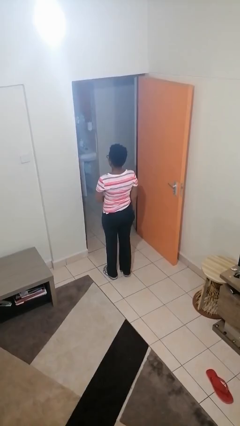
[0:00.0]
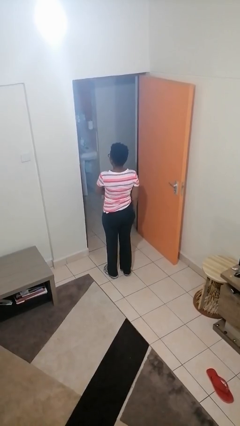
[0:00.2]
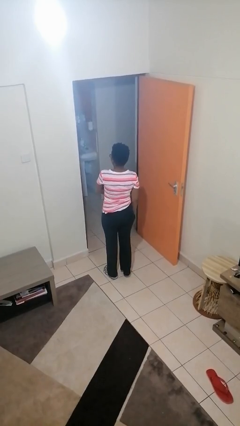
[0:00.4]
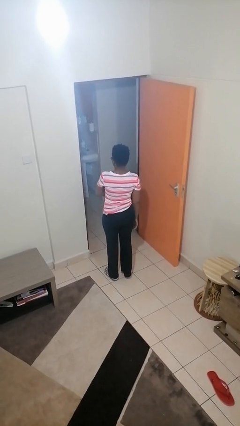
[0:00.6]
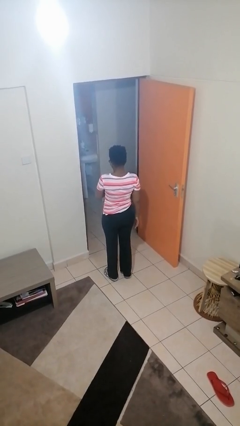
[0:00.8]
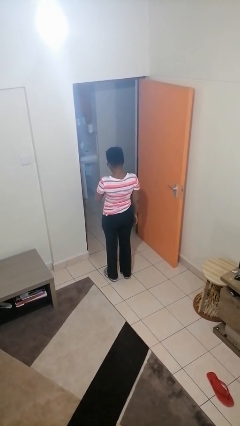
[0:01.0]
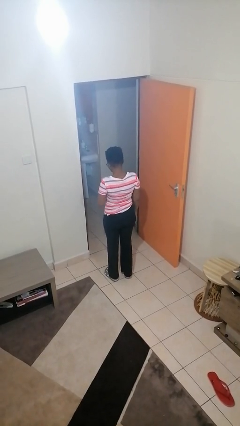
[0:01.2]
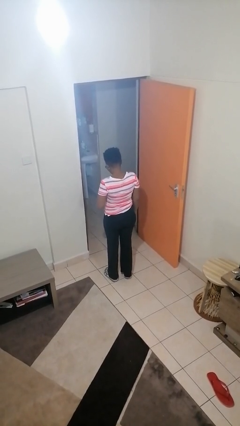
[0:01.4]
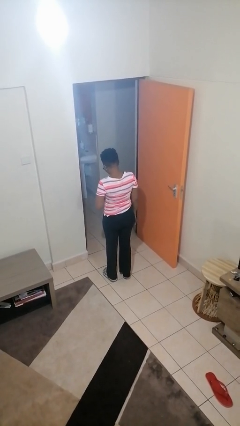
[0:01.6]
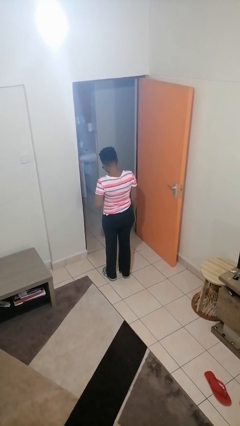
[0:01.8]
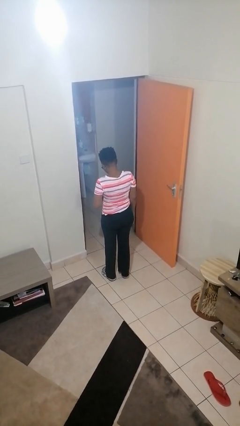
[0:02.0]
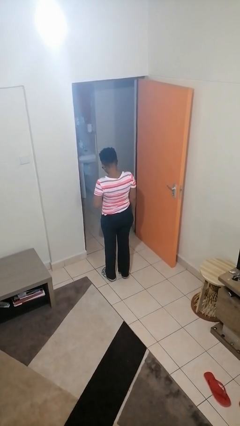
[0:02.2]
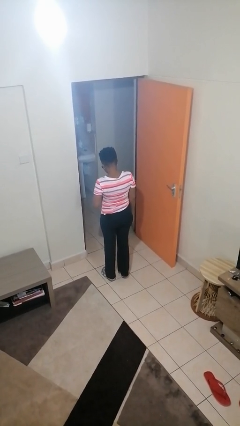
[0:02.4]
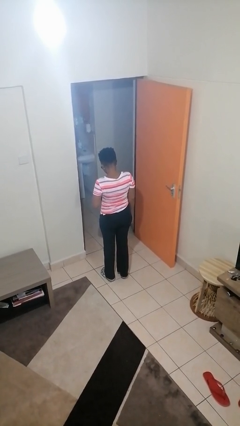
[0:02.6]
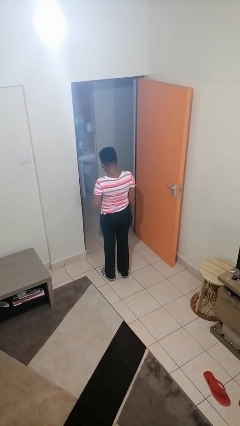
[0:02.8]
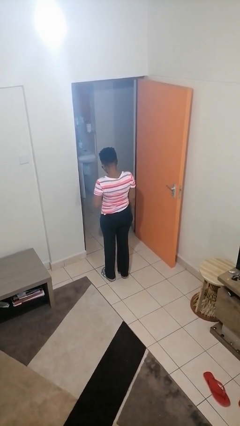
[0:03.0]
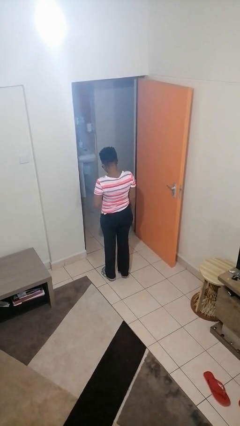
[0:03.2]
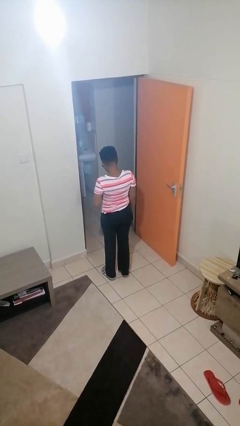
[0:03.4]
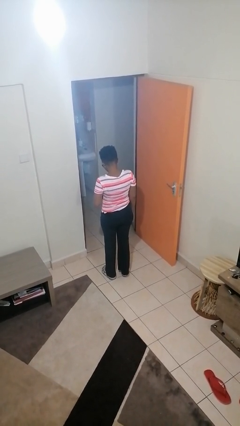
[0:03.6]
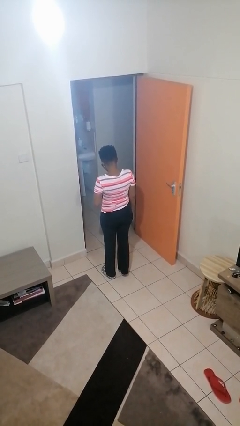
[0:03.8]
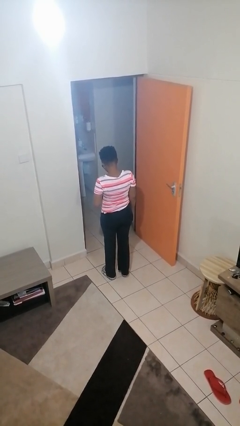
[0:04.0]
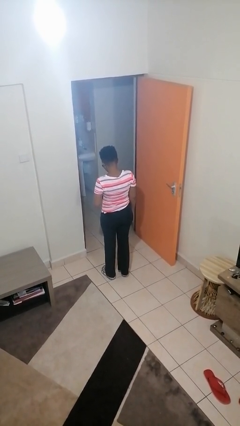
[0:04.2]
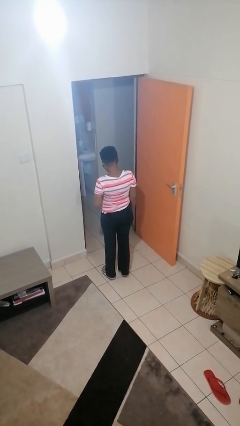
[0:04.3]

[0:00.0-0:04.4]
person takes phone from pocket

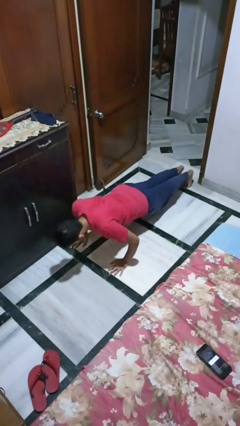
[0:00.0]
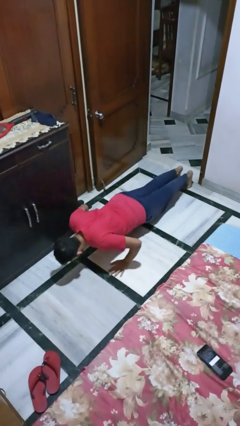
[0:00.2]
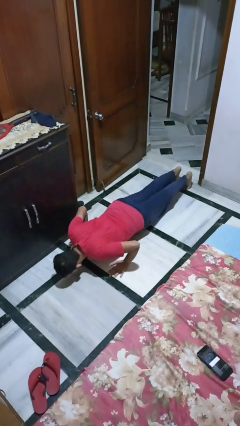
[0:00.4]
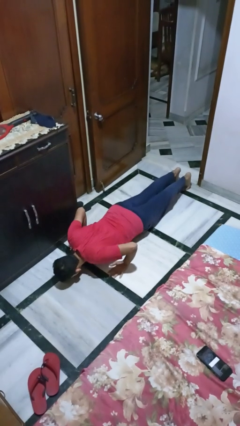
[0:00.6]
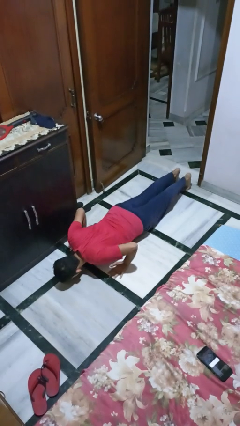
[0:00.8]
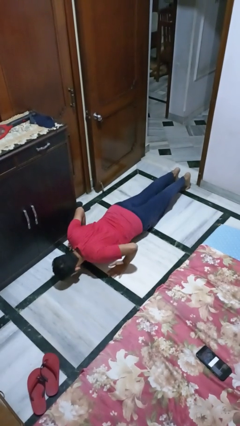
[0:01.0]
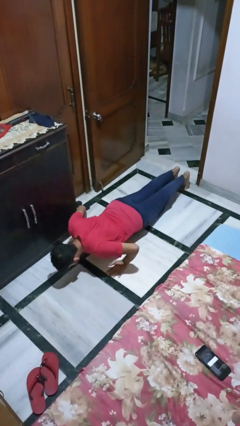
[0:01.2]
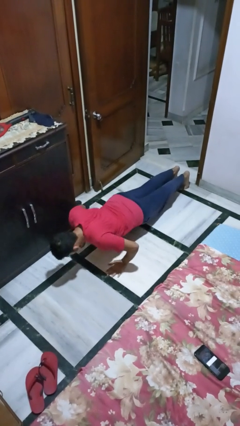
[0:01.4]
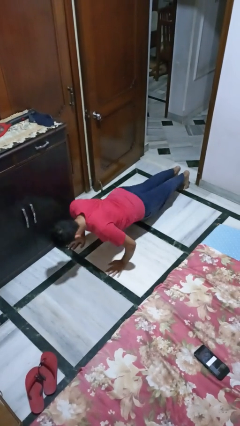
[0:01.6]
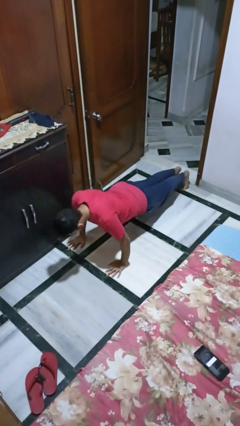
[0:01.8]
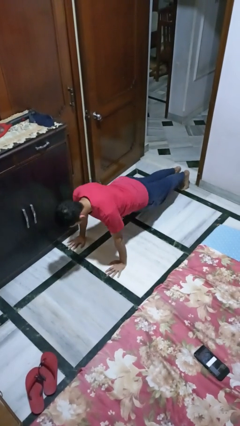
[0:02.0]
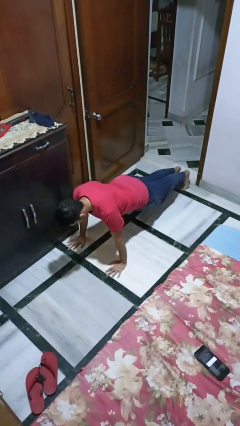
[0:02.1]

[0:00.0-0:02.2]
person exercises with pushup

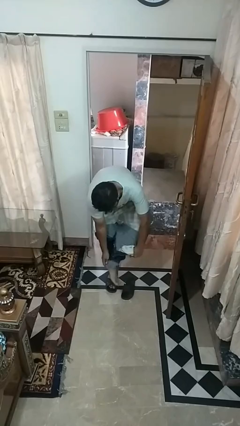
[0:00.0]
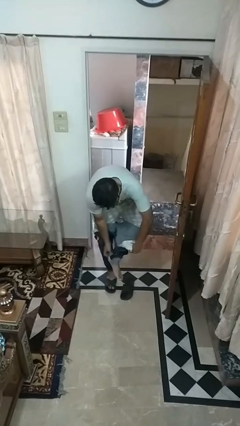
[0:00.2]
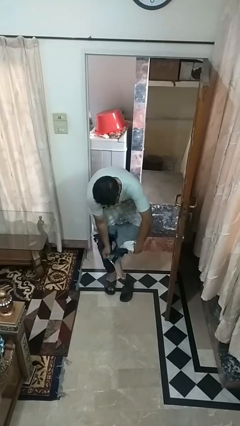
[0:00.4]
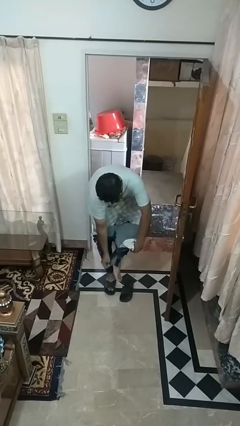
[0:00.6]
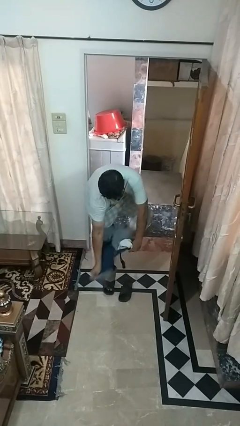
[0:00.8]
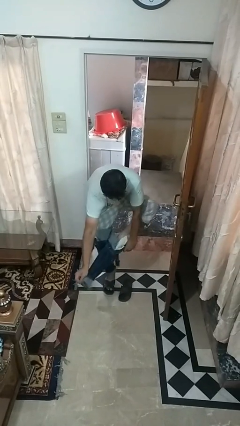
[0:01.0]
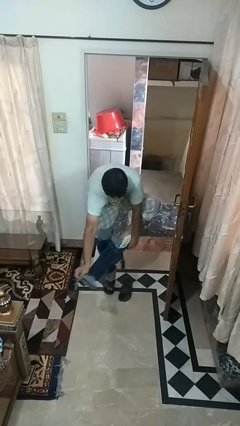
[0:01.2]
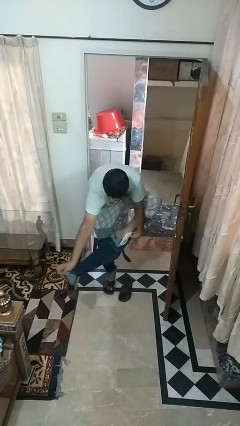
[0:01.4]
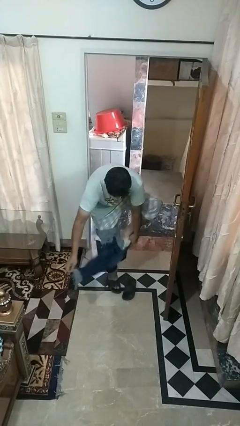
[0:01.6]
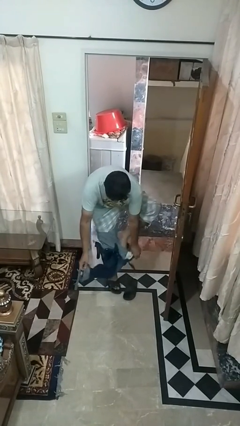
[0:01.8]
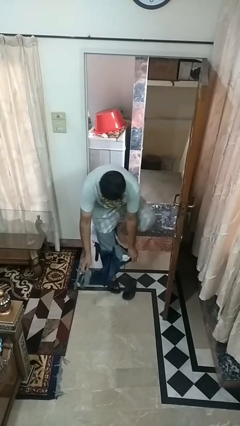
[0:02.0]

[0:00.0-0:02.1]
person takes off pants

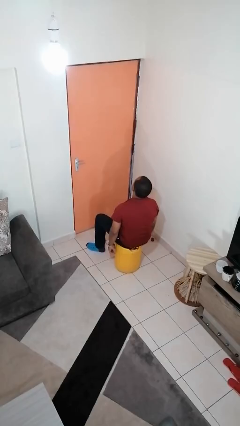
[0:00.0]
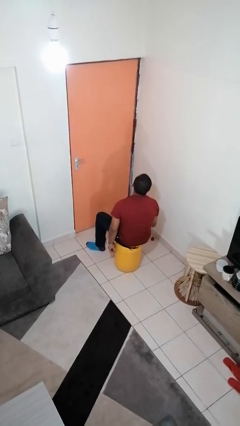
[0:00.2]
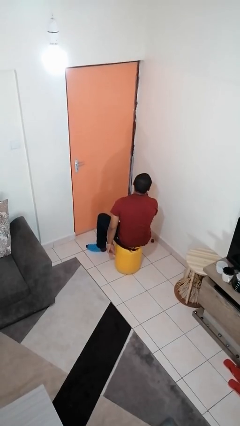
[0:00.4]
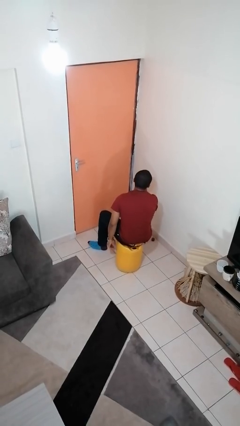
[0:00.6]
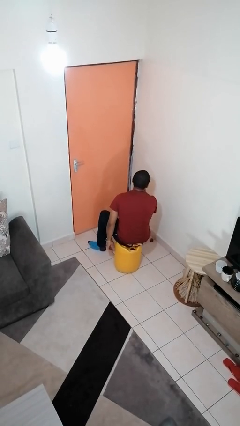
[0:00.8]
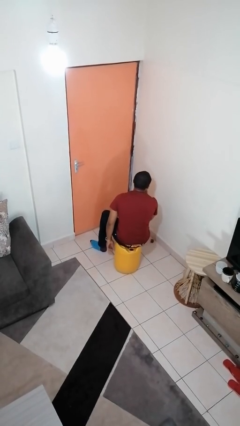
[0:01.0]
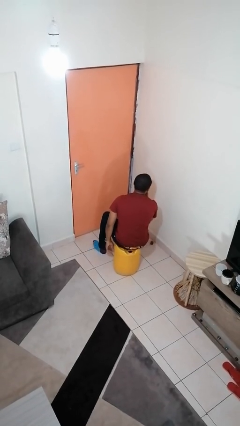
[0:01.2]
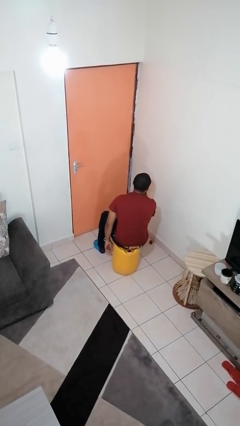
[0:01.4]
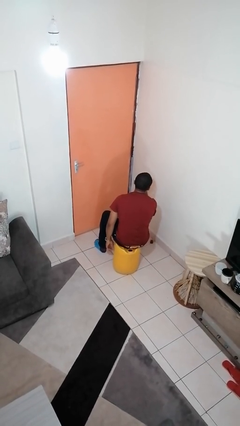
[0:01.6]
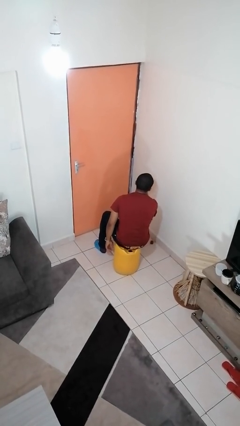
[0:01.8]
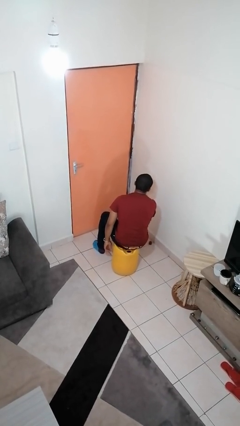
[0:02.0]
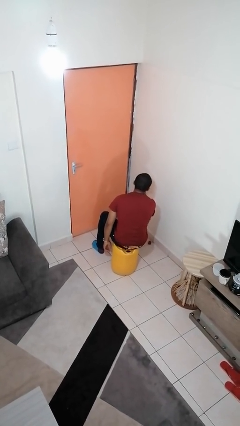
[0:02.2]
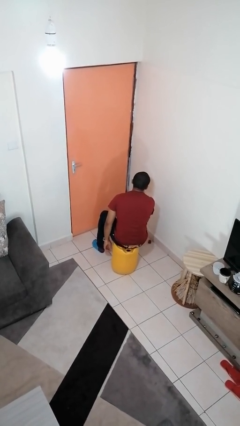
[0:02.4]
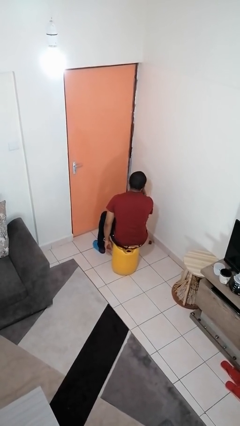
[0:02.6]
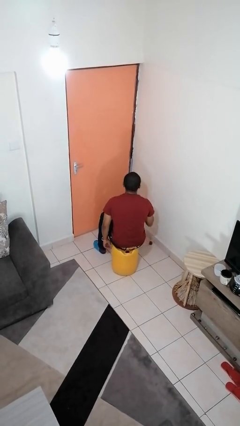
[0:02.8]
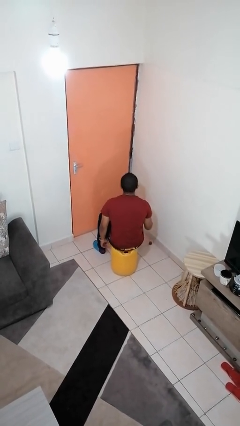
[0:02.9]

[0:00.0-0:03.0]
person strokes chin

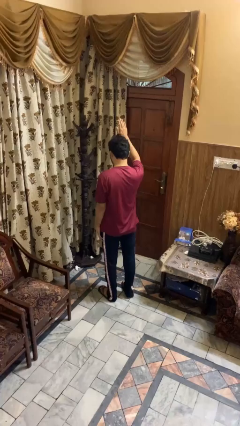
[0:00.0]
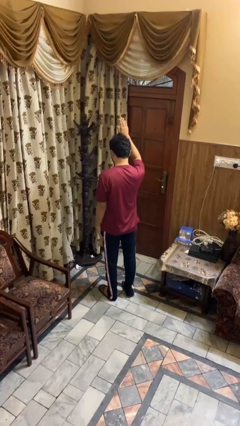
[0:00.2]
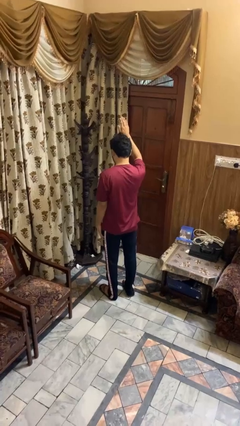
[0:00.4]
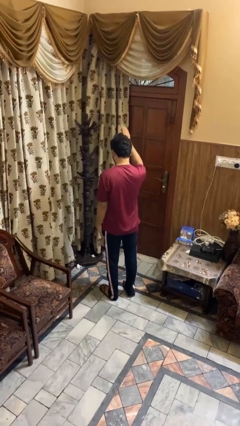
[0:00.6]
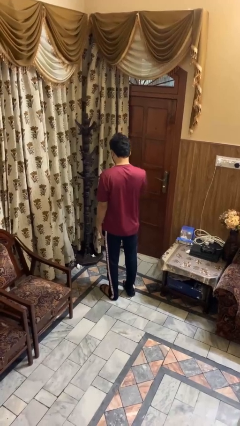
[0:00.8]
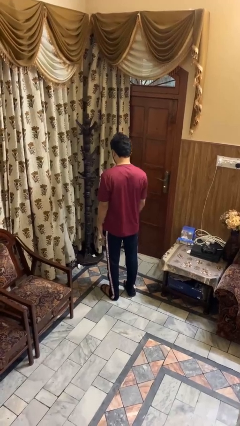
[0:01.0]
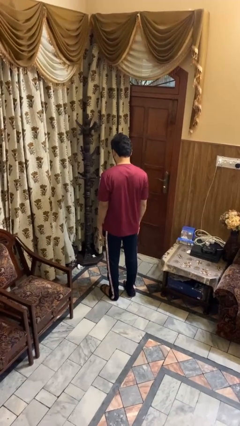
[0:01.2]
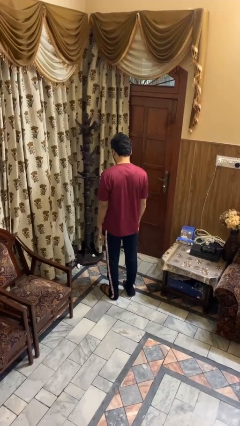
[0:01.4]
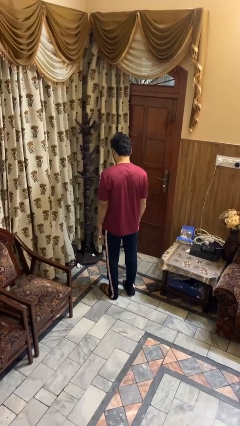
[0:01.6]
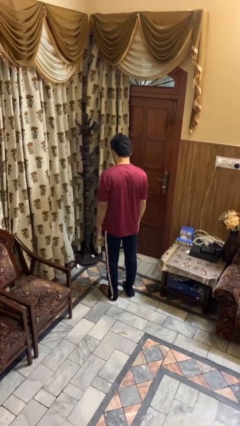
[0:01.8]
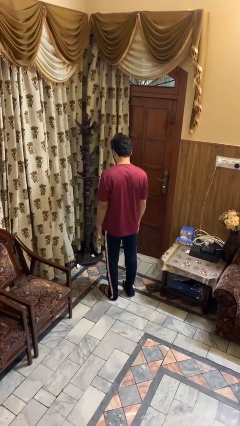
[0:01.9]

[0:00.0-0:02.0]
person gestures lower hand

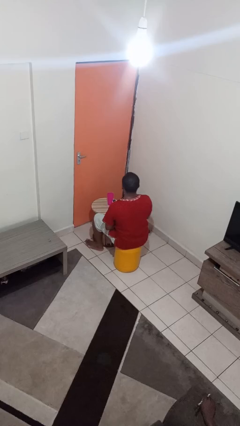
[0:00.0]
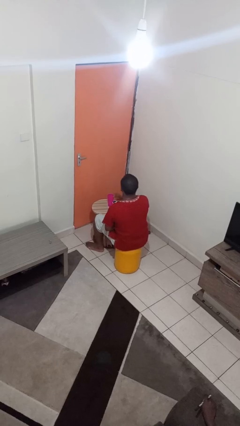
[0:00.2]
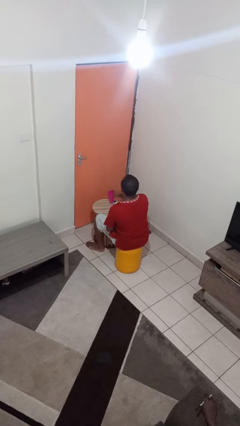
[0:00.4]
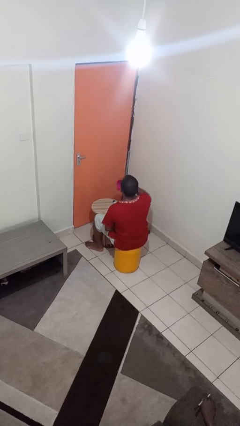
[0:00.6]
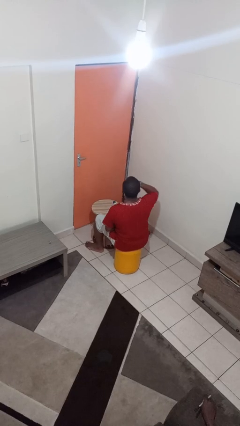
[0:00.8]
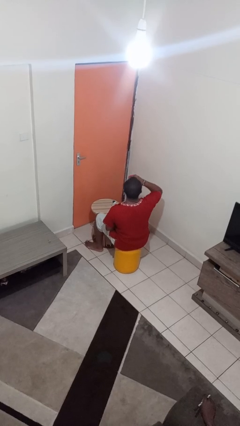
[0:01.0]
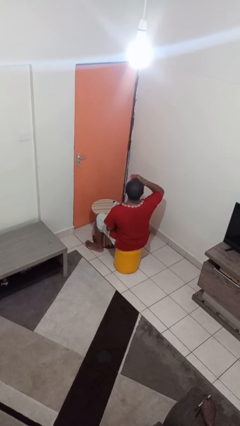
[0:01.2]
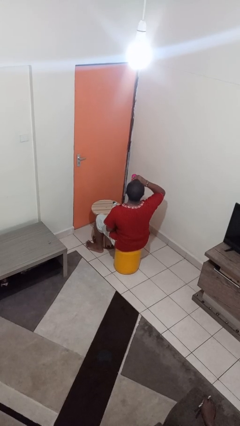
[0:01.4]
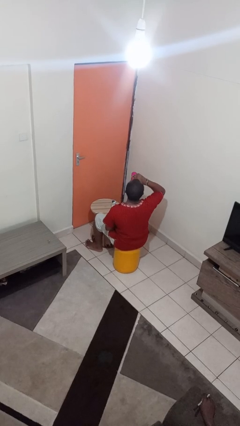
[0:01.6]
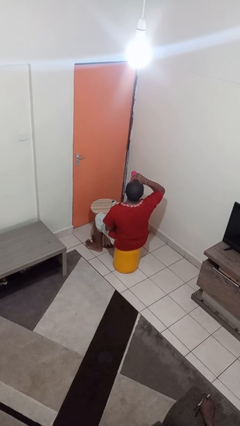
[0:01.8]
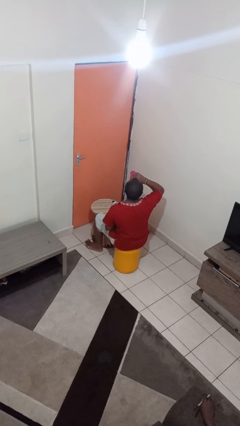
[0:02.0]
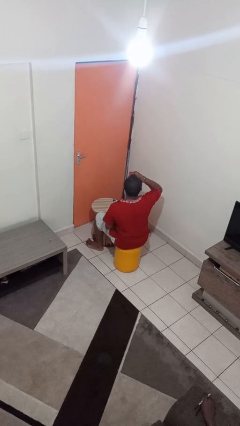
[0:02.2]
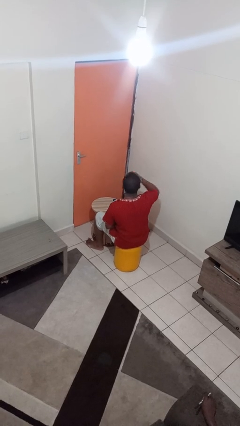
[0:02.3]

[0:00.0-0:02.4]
person drinks from cup

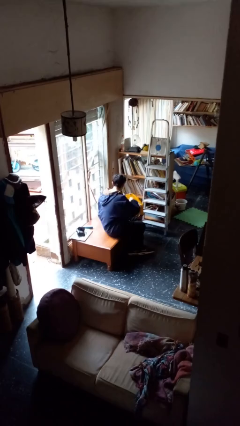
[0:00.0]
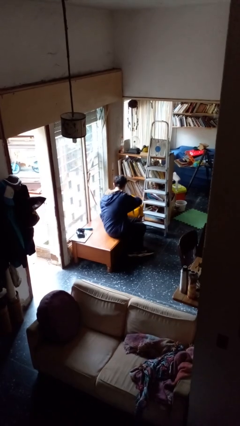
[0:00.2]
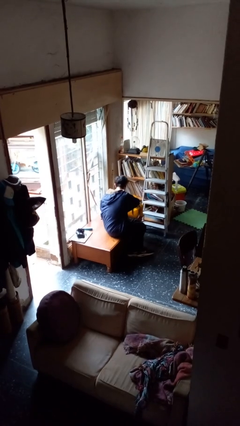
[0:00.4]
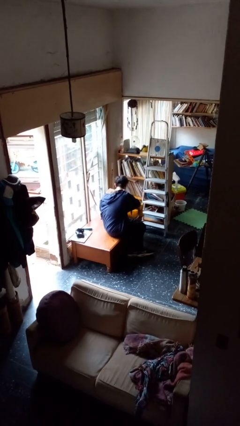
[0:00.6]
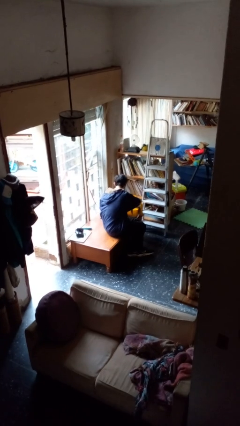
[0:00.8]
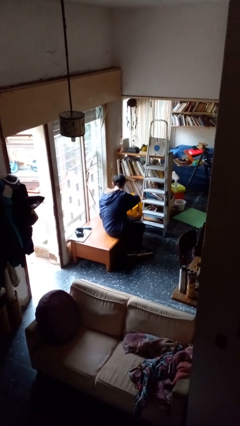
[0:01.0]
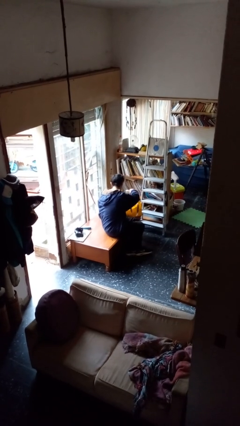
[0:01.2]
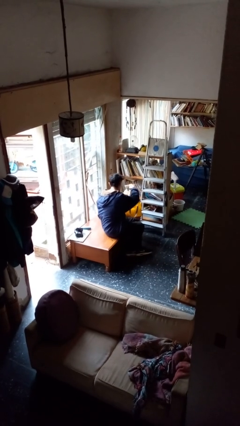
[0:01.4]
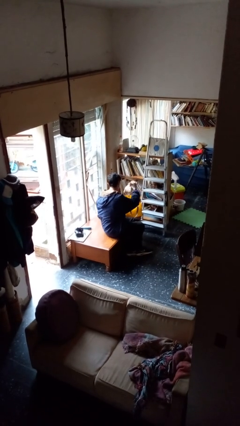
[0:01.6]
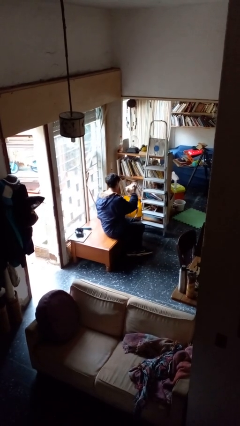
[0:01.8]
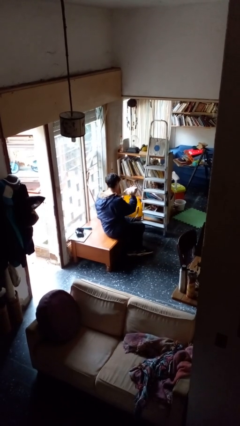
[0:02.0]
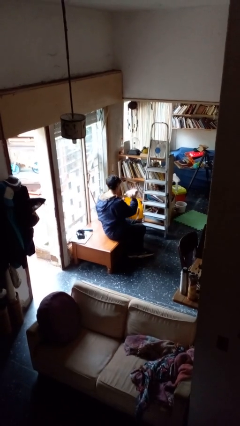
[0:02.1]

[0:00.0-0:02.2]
person takes object from bag
